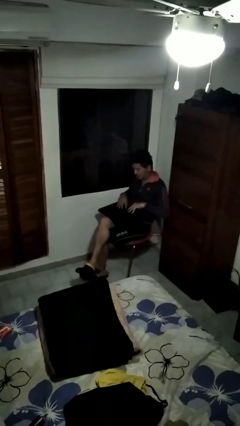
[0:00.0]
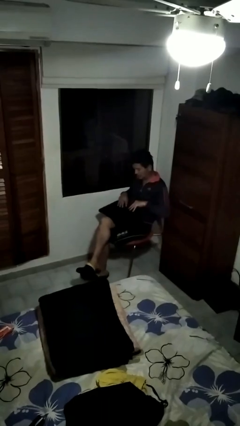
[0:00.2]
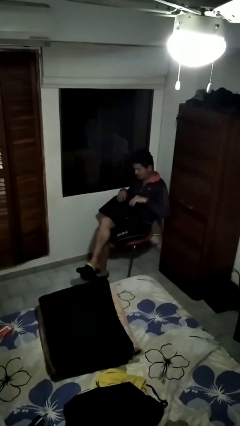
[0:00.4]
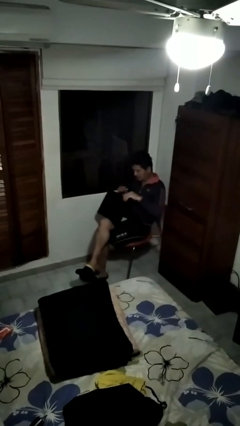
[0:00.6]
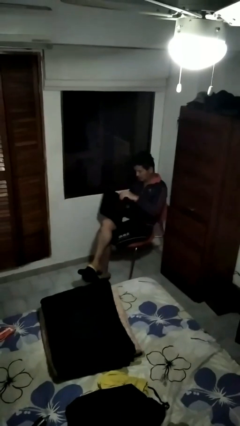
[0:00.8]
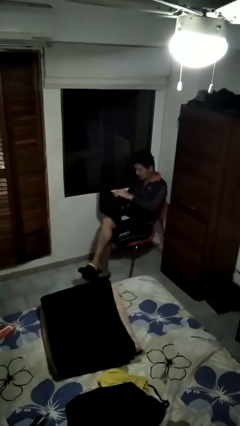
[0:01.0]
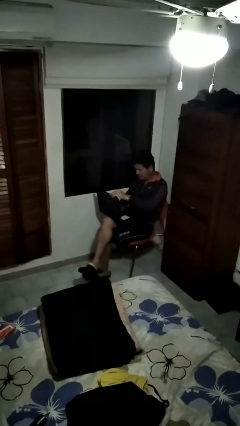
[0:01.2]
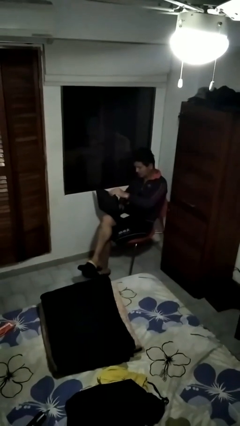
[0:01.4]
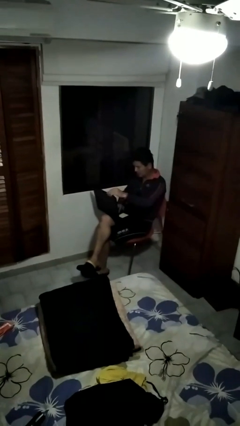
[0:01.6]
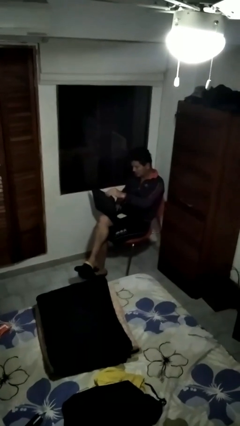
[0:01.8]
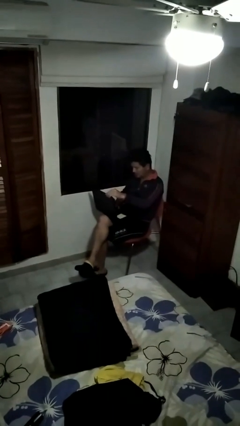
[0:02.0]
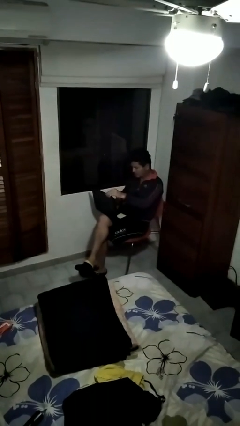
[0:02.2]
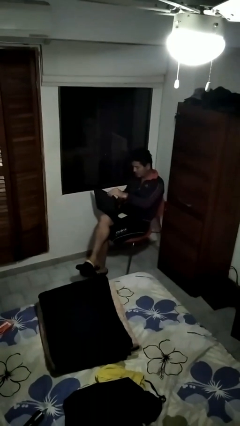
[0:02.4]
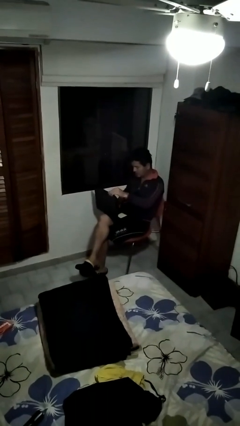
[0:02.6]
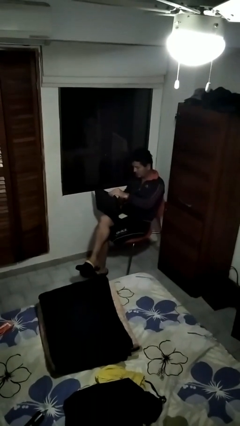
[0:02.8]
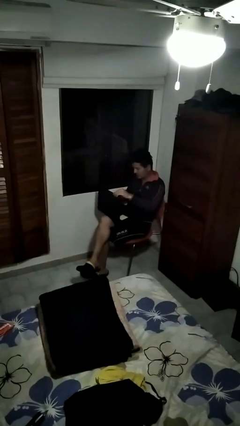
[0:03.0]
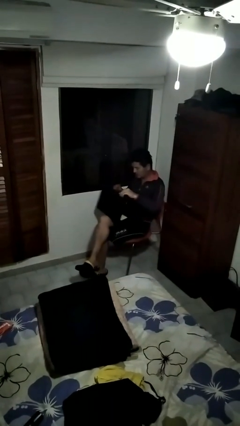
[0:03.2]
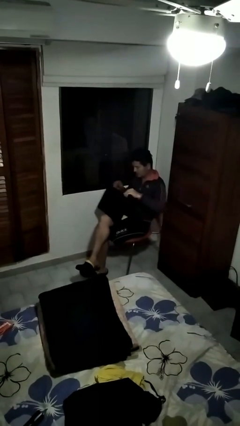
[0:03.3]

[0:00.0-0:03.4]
person interacts with laptop

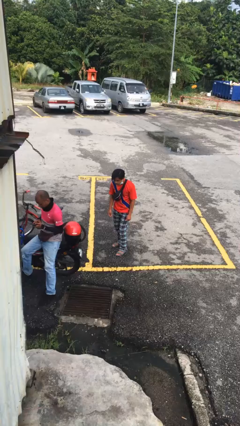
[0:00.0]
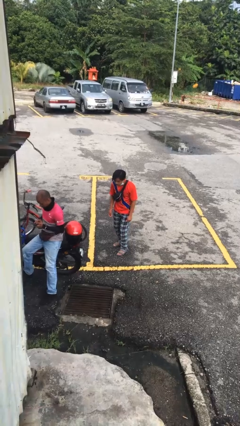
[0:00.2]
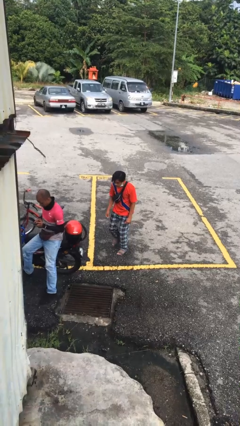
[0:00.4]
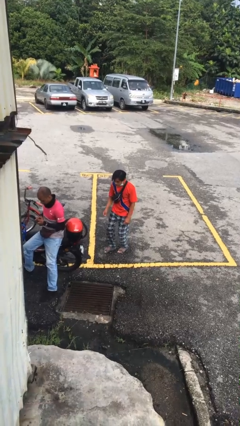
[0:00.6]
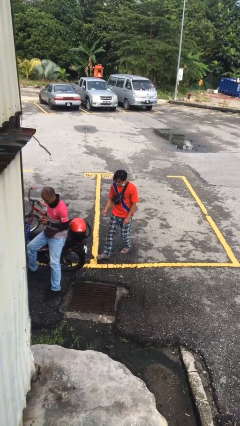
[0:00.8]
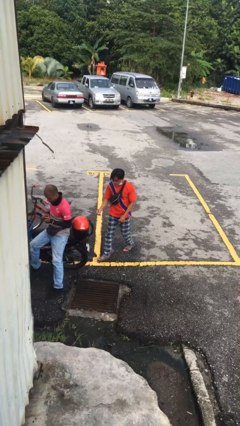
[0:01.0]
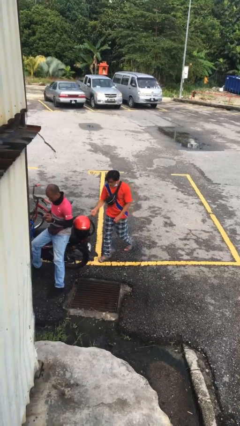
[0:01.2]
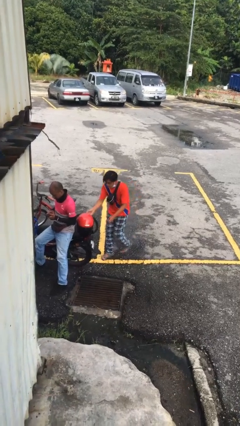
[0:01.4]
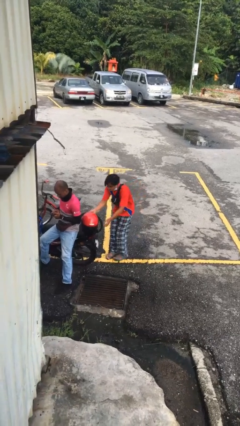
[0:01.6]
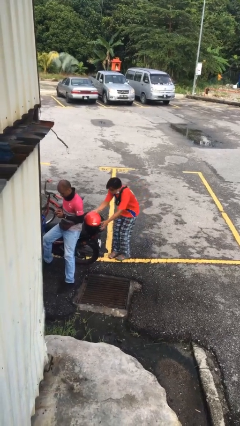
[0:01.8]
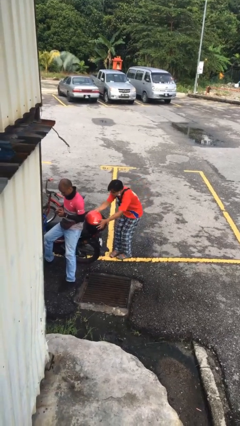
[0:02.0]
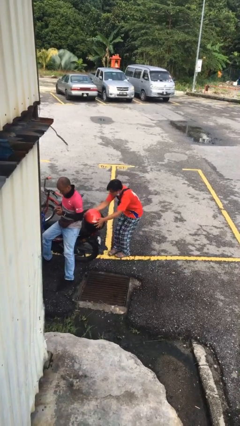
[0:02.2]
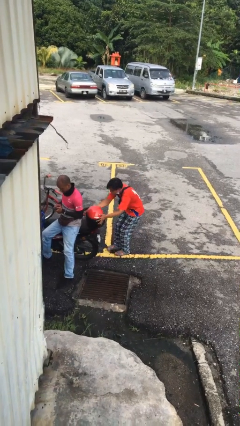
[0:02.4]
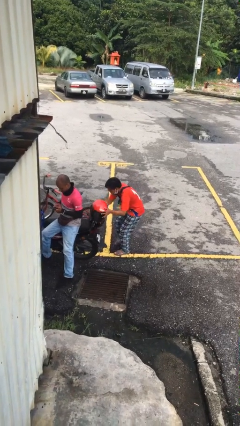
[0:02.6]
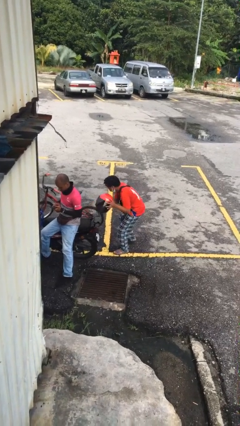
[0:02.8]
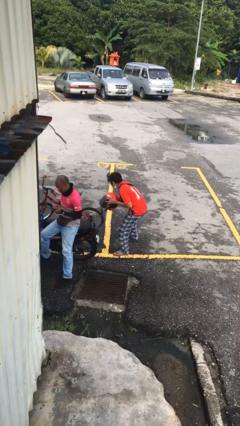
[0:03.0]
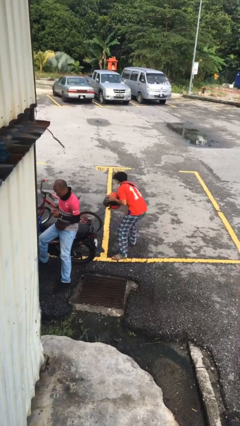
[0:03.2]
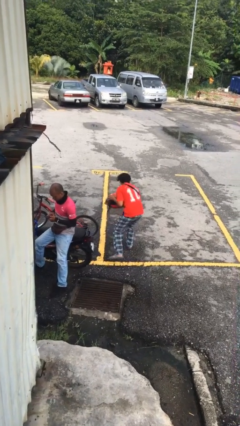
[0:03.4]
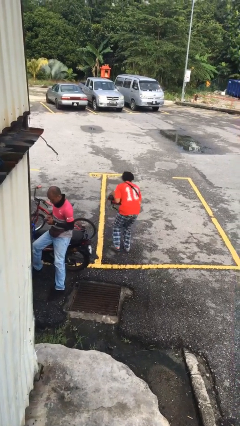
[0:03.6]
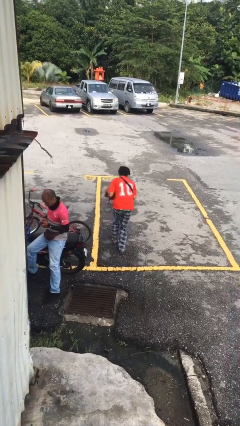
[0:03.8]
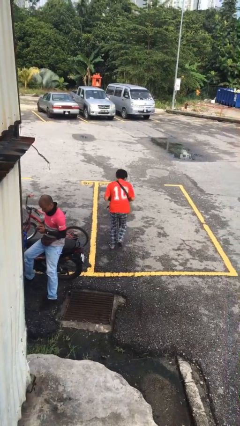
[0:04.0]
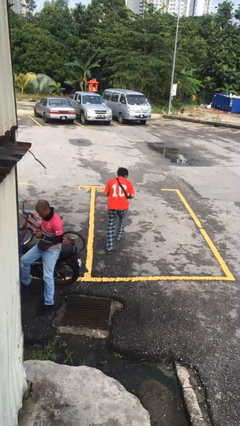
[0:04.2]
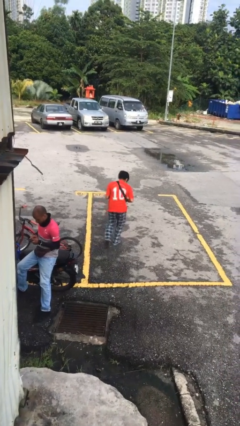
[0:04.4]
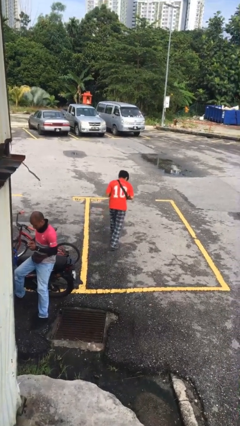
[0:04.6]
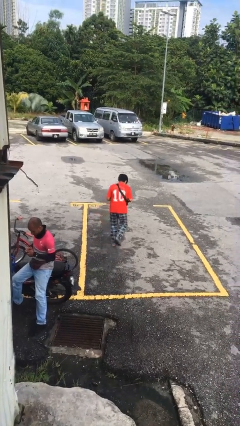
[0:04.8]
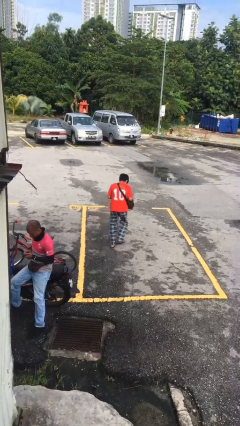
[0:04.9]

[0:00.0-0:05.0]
person steals object from person

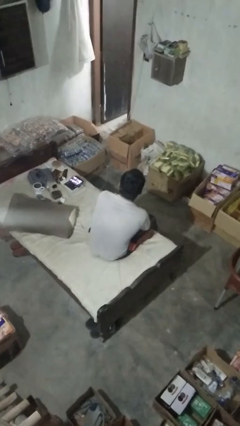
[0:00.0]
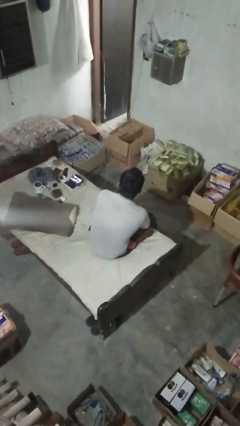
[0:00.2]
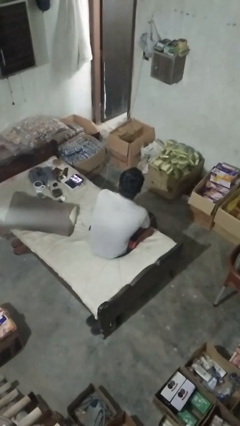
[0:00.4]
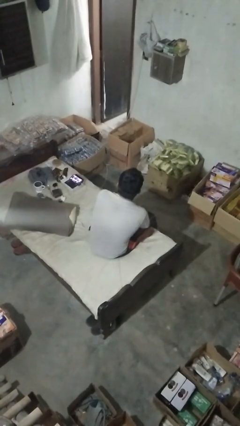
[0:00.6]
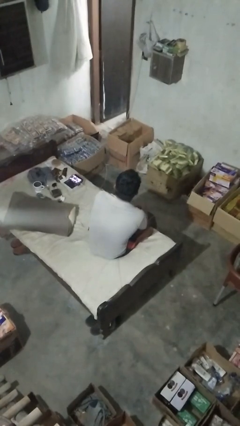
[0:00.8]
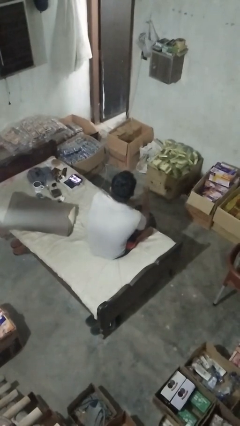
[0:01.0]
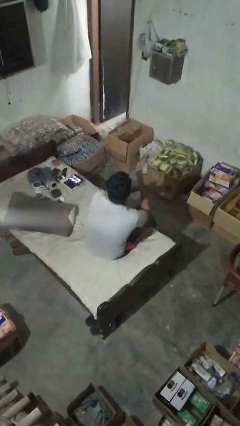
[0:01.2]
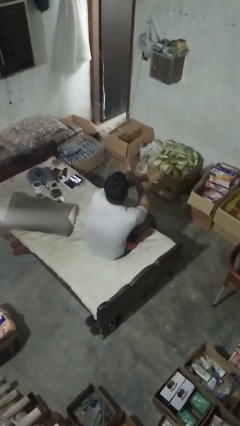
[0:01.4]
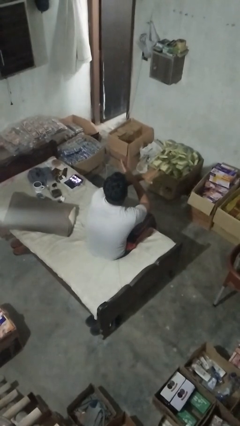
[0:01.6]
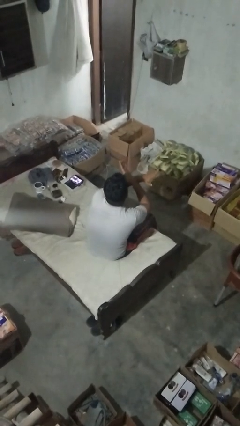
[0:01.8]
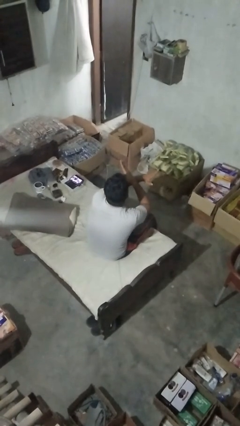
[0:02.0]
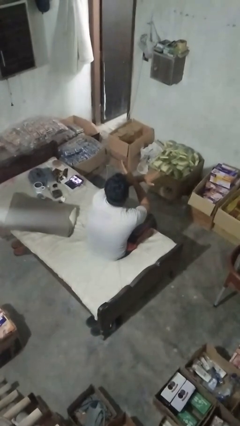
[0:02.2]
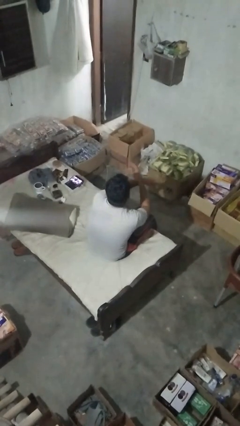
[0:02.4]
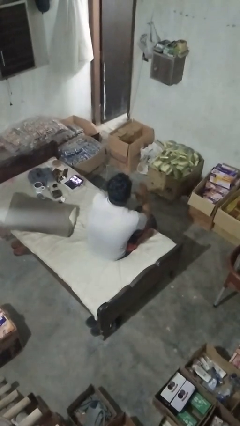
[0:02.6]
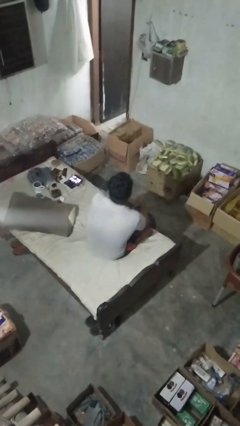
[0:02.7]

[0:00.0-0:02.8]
person gestures arms x

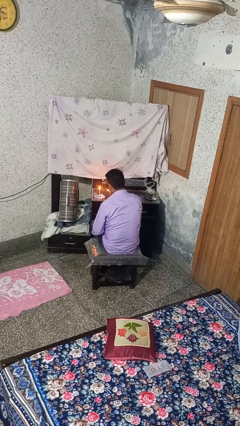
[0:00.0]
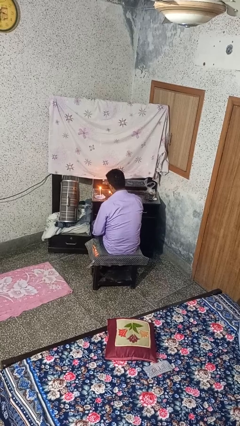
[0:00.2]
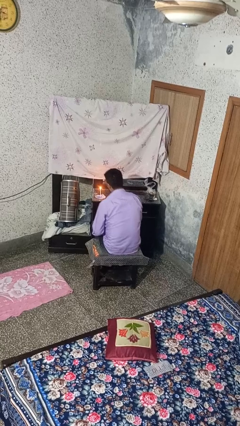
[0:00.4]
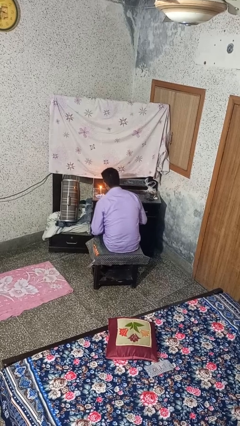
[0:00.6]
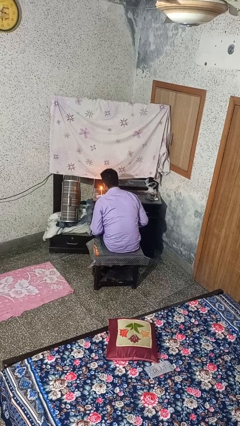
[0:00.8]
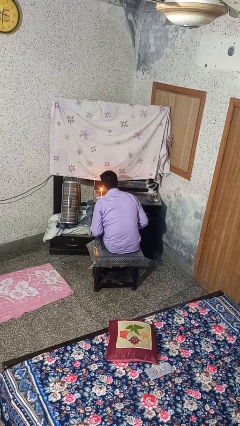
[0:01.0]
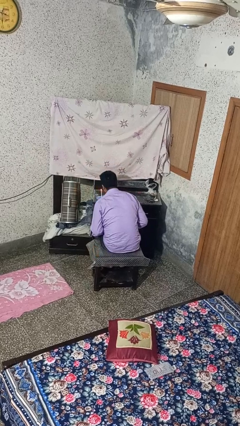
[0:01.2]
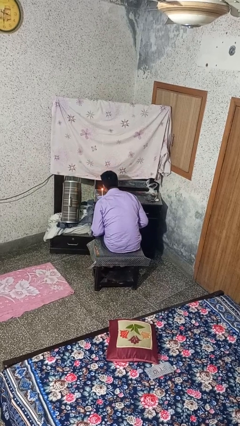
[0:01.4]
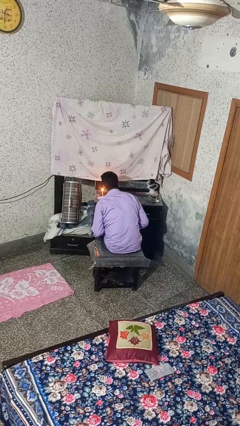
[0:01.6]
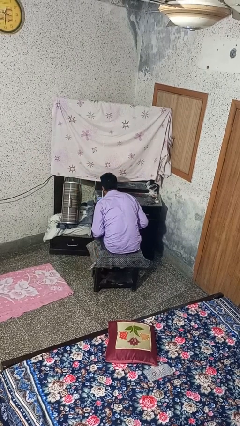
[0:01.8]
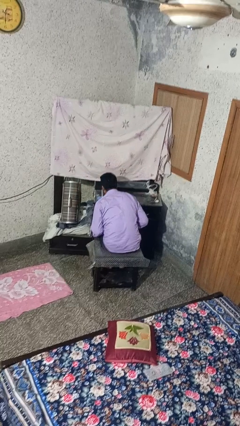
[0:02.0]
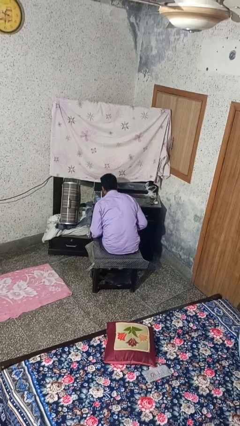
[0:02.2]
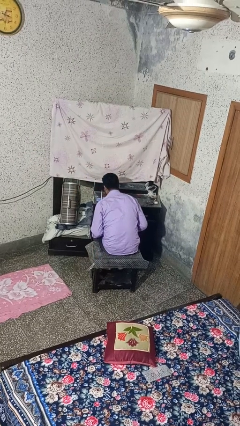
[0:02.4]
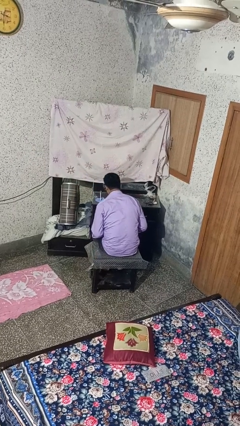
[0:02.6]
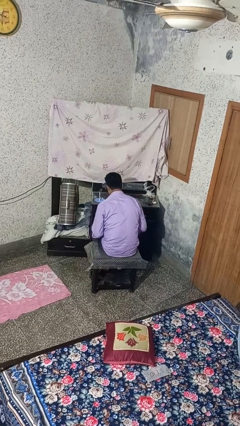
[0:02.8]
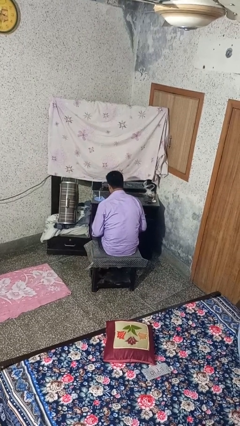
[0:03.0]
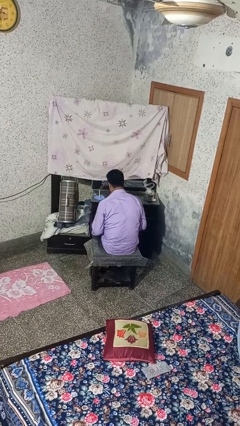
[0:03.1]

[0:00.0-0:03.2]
person extinguishes candle

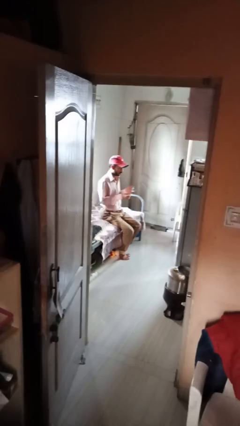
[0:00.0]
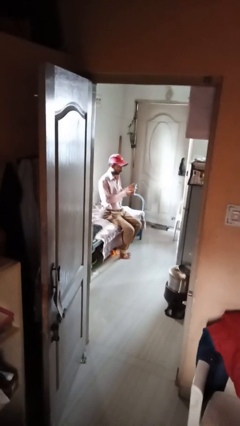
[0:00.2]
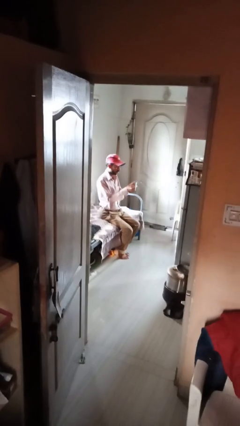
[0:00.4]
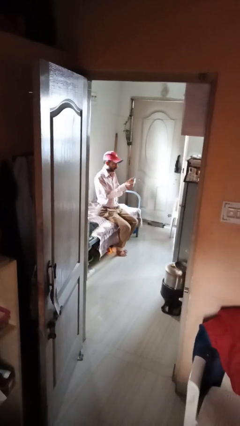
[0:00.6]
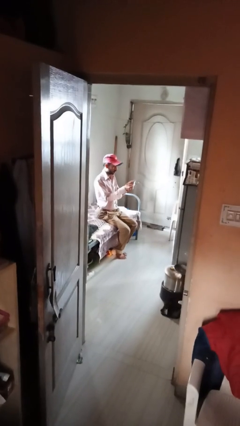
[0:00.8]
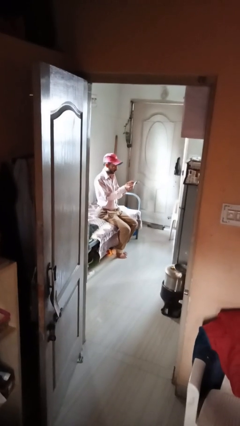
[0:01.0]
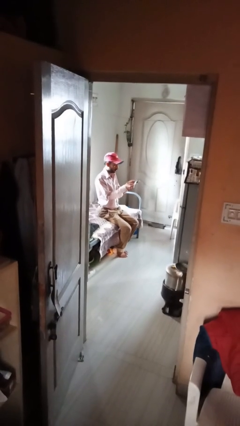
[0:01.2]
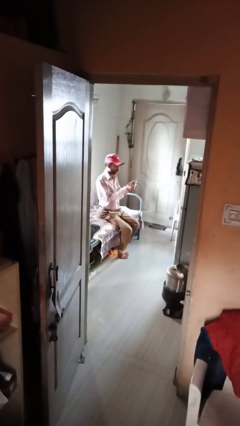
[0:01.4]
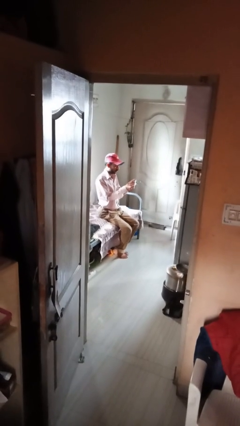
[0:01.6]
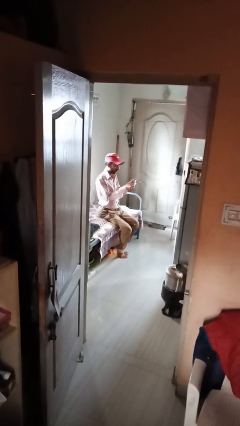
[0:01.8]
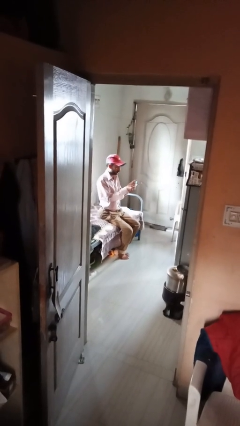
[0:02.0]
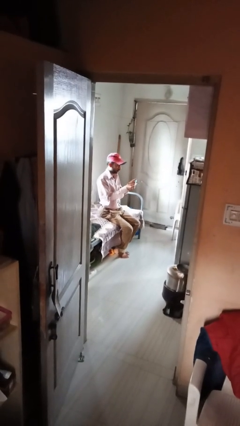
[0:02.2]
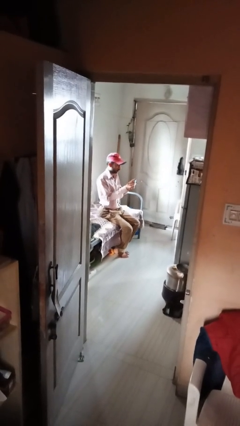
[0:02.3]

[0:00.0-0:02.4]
person clips fingernails

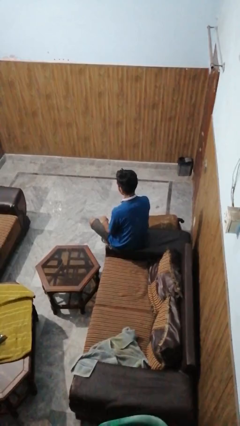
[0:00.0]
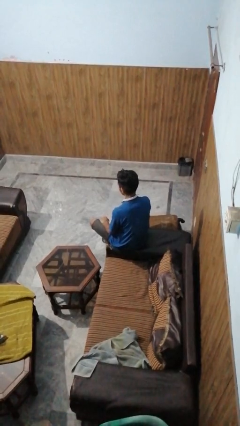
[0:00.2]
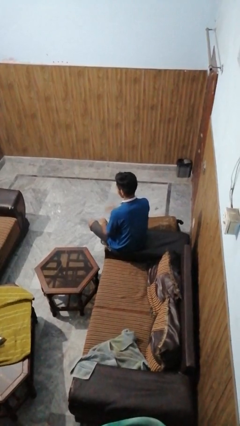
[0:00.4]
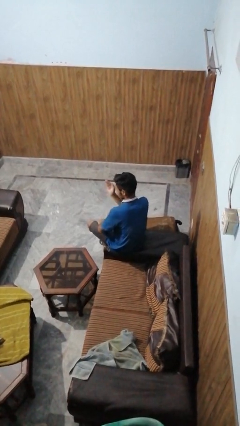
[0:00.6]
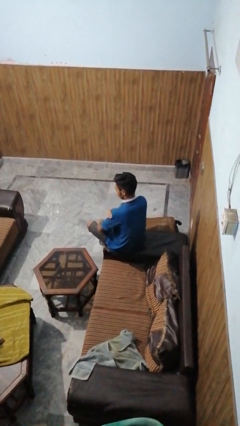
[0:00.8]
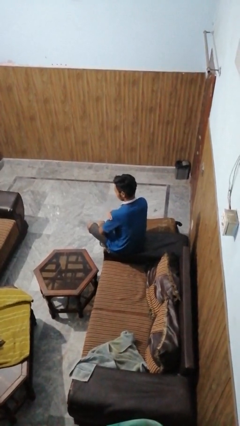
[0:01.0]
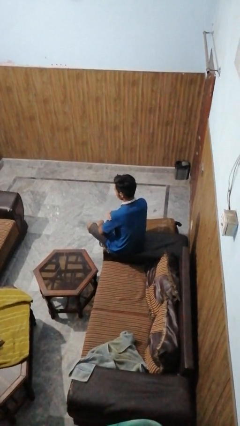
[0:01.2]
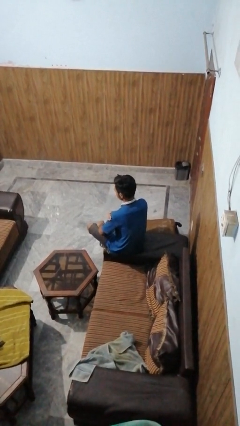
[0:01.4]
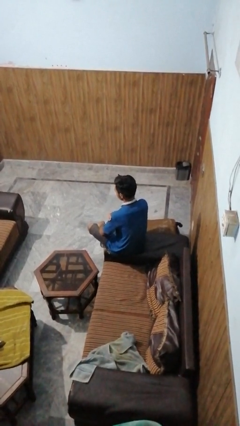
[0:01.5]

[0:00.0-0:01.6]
person swats bug
